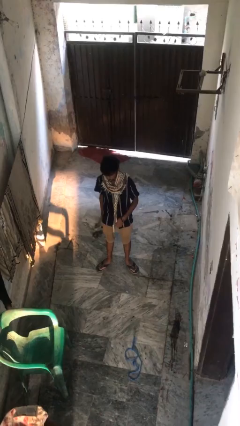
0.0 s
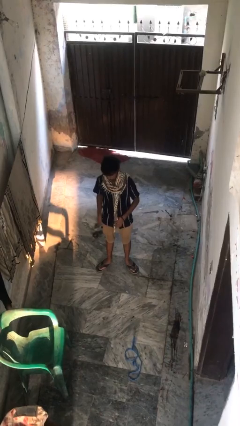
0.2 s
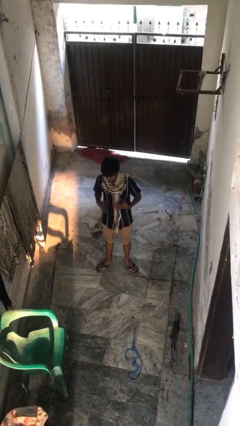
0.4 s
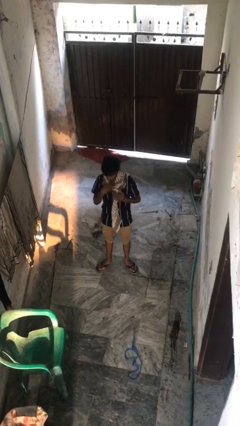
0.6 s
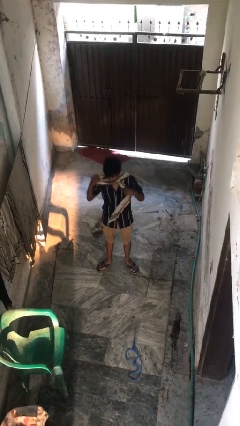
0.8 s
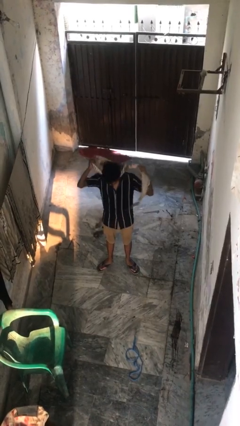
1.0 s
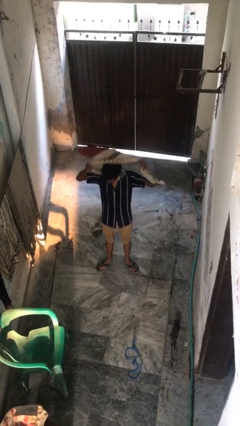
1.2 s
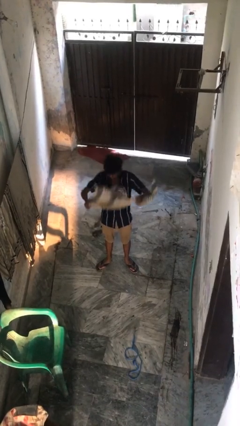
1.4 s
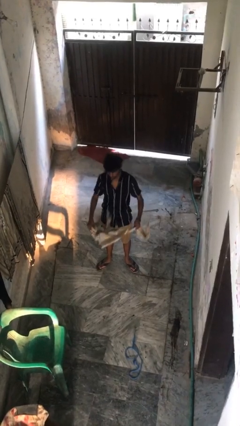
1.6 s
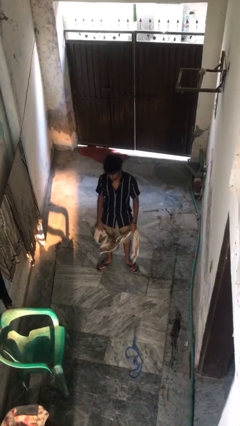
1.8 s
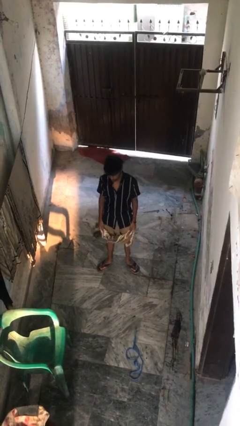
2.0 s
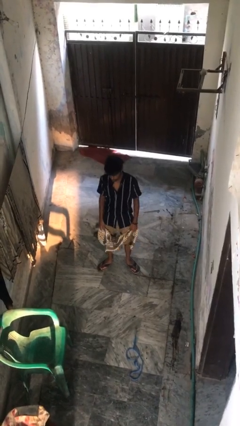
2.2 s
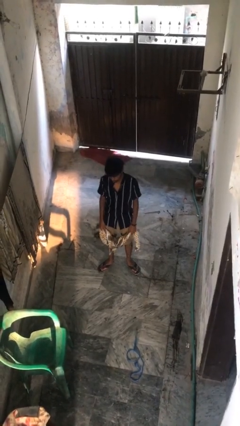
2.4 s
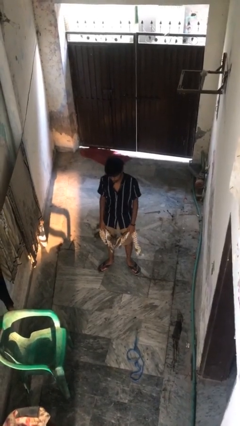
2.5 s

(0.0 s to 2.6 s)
person takes off scarf

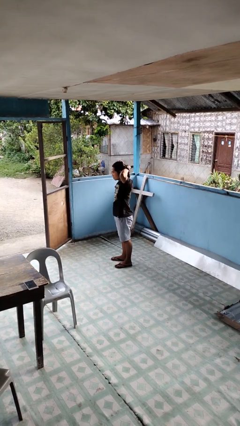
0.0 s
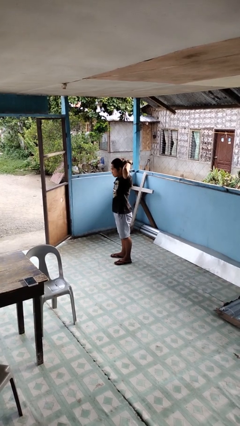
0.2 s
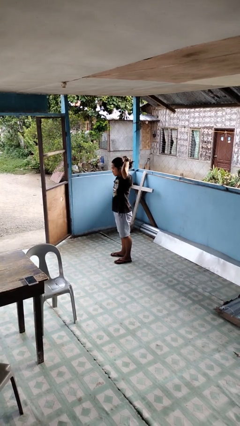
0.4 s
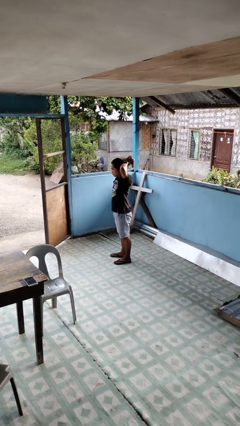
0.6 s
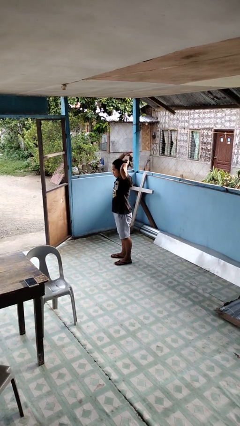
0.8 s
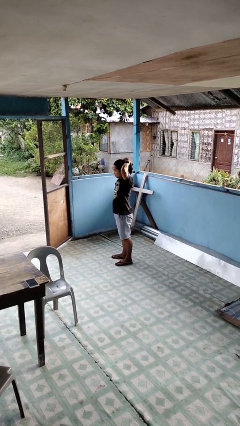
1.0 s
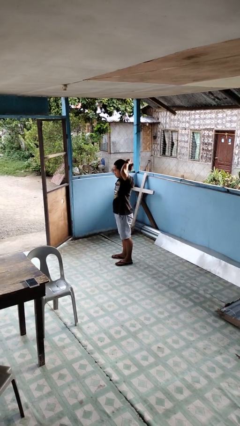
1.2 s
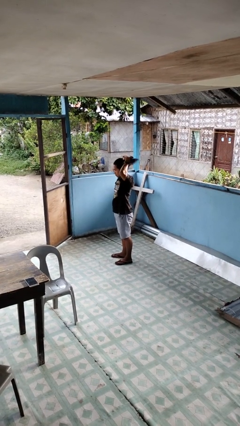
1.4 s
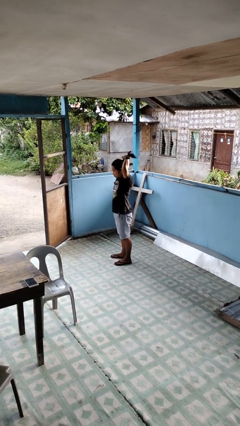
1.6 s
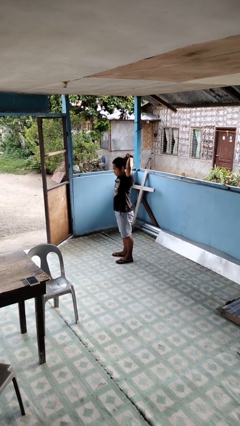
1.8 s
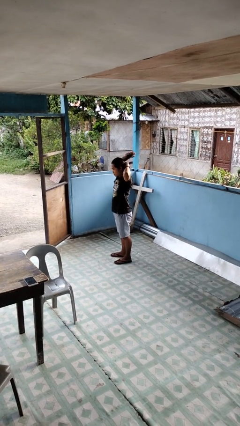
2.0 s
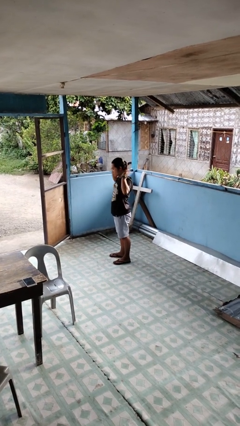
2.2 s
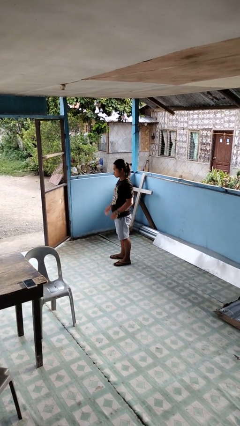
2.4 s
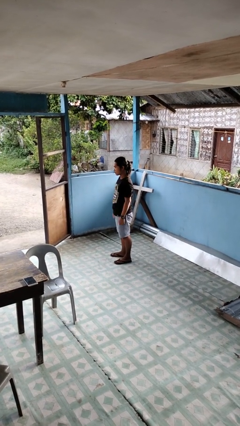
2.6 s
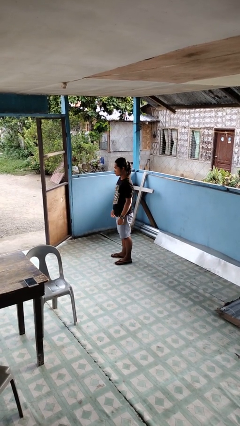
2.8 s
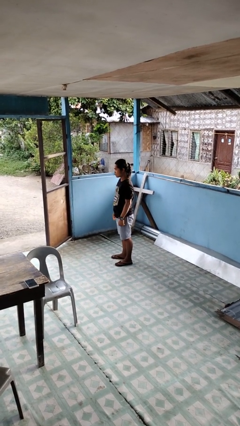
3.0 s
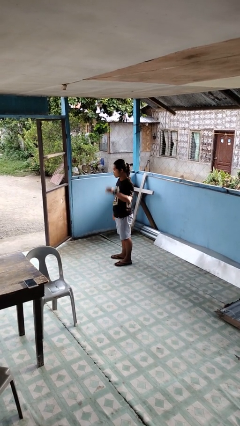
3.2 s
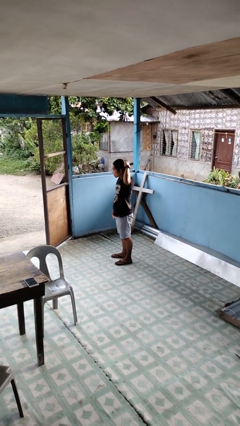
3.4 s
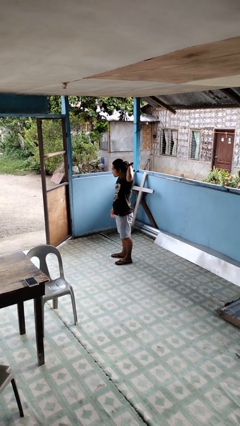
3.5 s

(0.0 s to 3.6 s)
person puts hair in ponytail

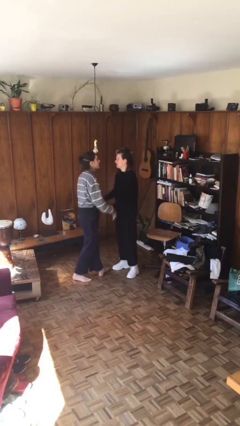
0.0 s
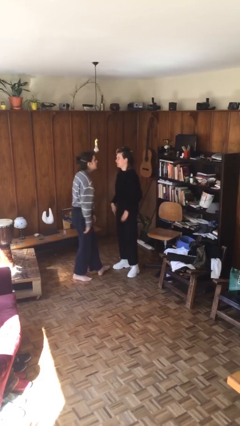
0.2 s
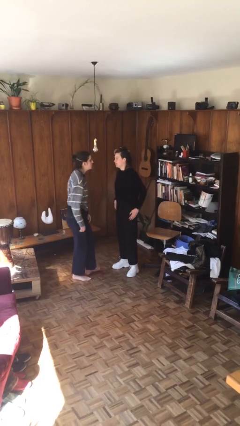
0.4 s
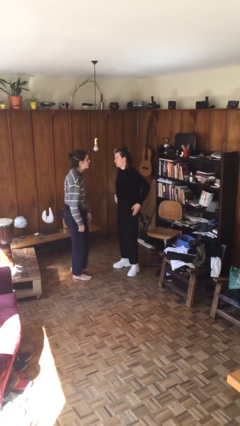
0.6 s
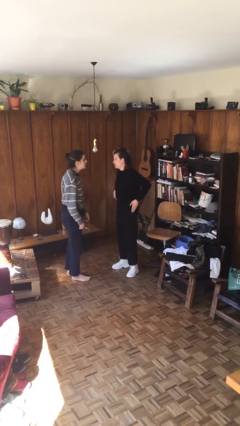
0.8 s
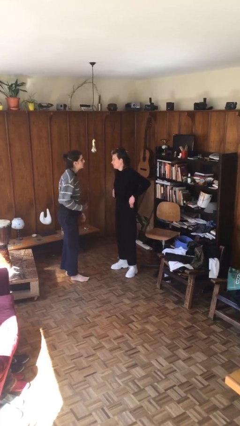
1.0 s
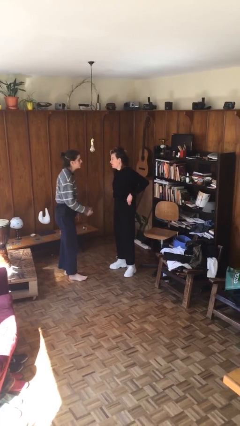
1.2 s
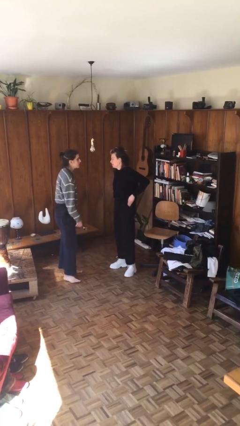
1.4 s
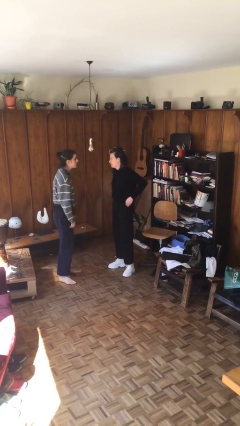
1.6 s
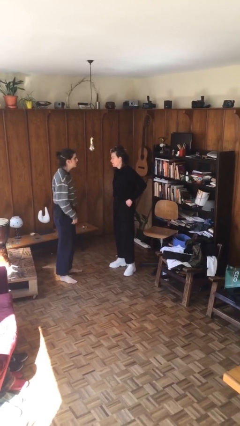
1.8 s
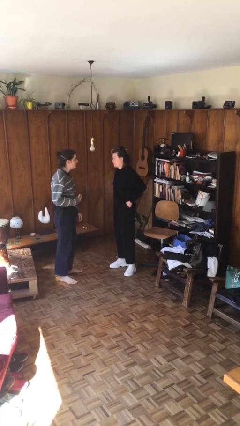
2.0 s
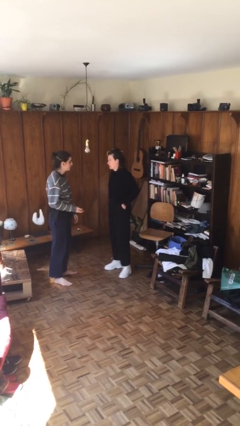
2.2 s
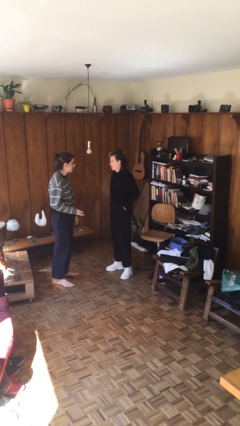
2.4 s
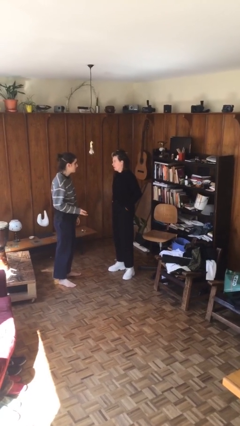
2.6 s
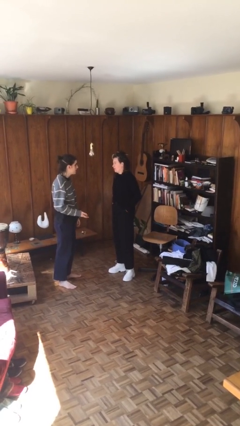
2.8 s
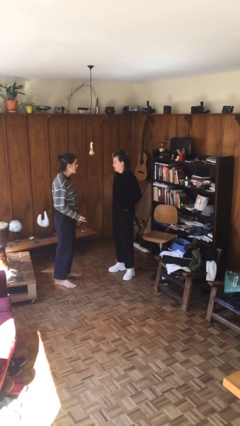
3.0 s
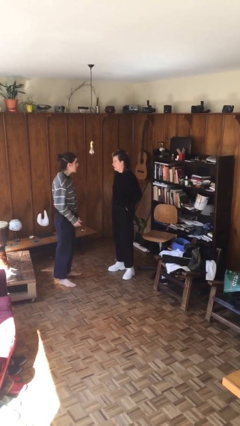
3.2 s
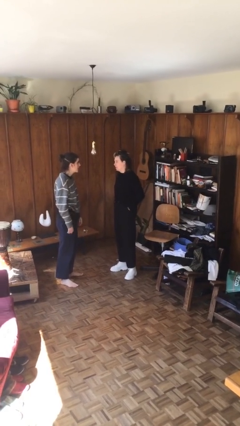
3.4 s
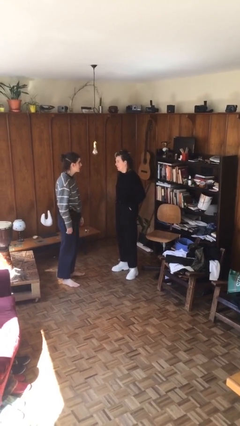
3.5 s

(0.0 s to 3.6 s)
person talks to person

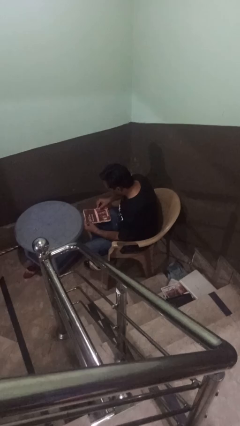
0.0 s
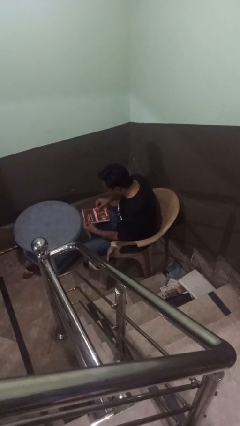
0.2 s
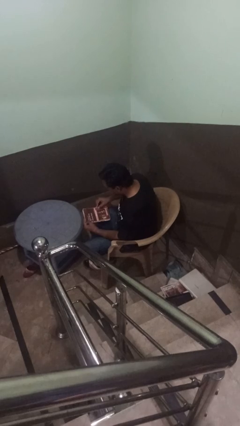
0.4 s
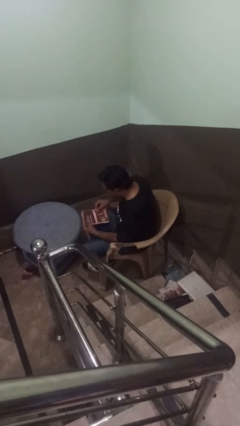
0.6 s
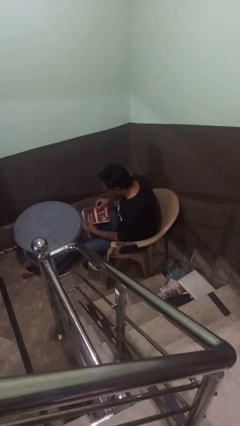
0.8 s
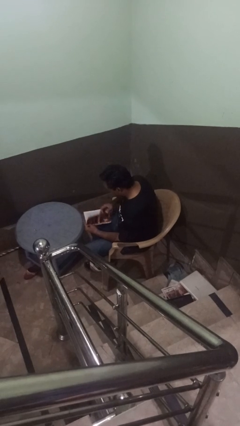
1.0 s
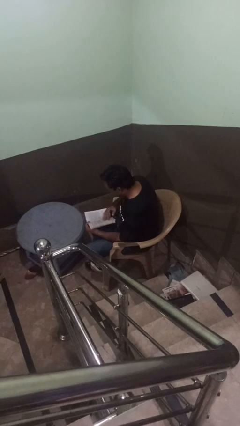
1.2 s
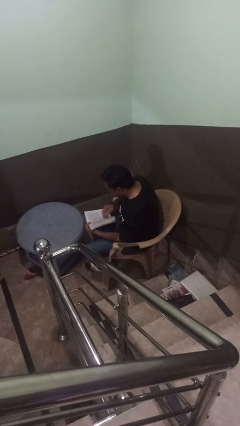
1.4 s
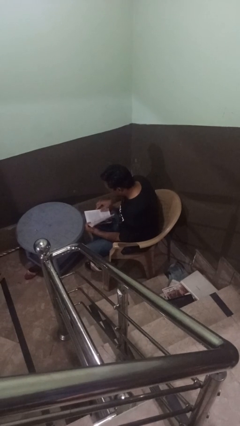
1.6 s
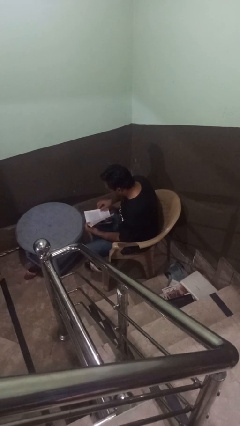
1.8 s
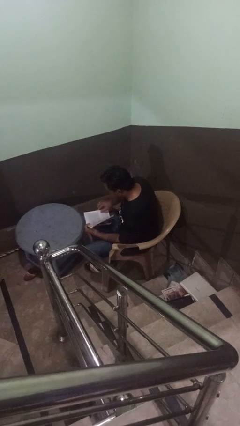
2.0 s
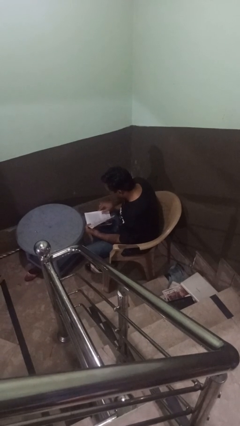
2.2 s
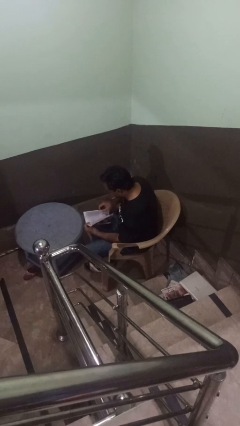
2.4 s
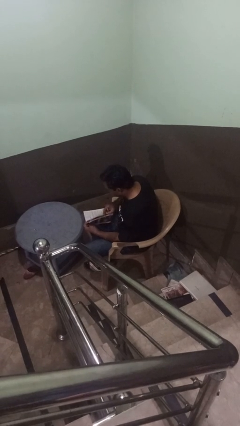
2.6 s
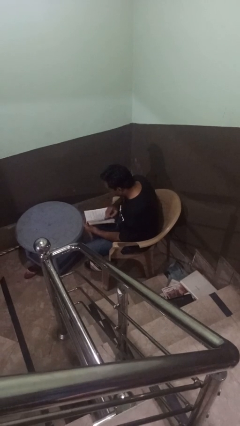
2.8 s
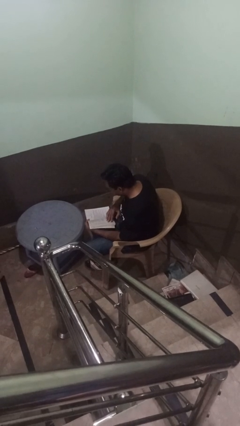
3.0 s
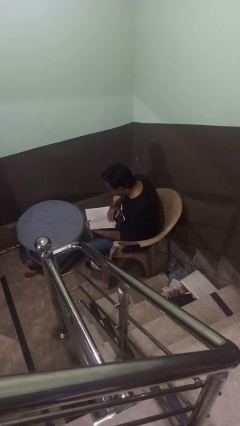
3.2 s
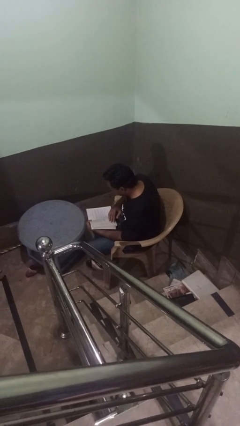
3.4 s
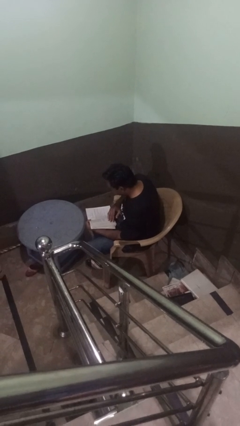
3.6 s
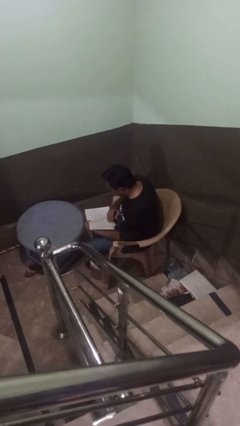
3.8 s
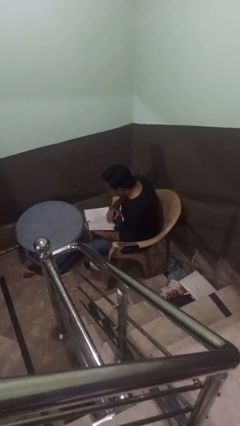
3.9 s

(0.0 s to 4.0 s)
person reads book

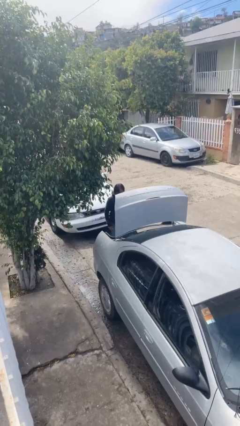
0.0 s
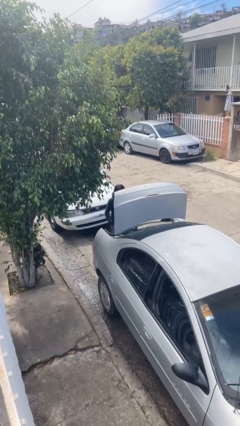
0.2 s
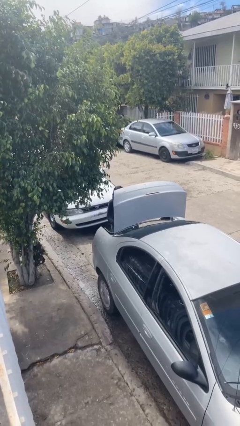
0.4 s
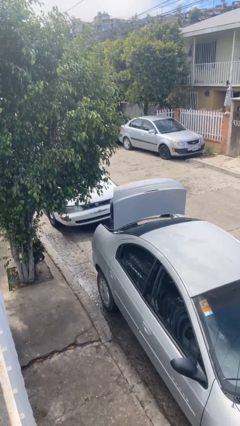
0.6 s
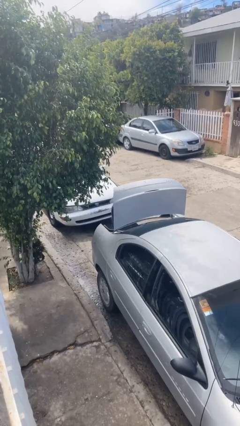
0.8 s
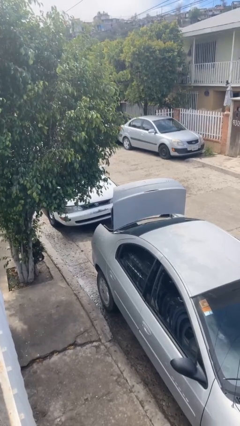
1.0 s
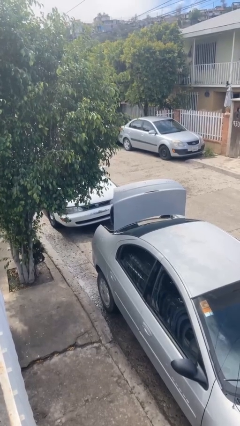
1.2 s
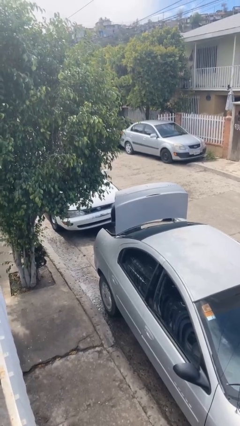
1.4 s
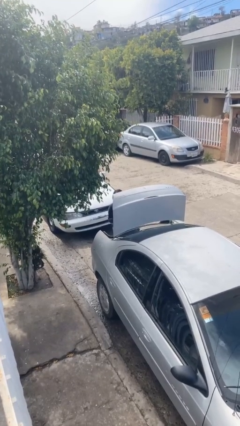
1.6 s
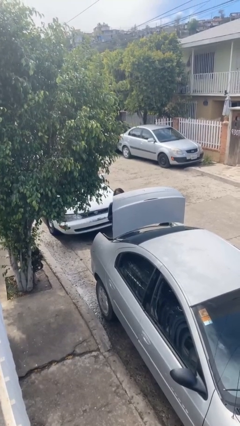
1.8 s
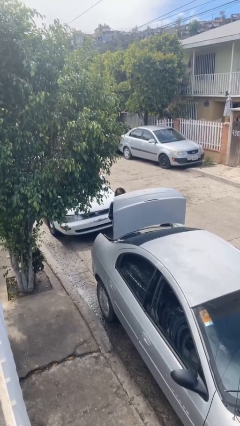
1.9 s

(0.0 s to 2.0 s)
person unloads car

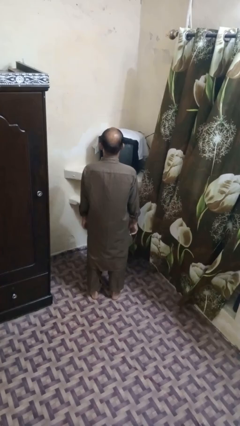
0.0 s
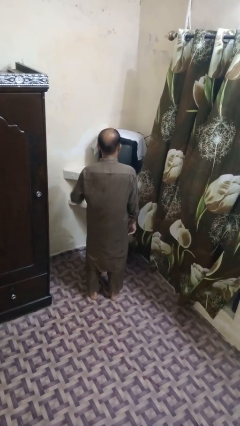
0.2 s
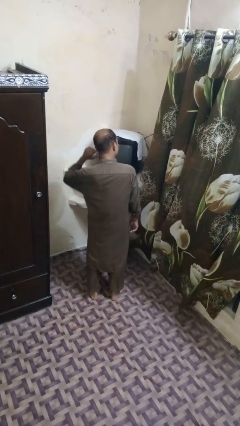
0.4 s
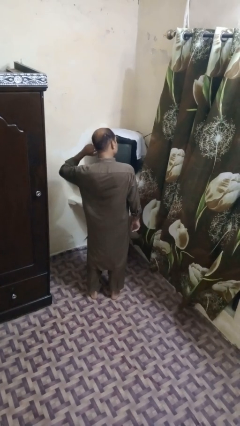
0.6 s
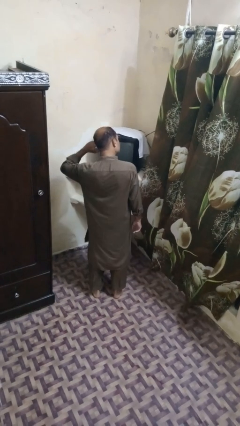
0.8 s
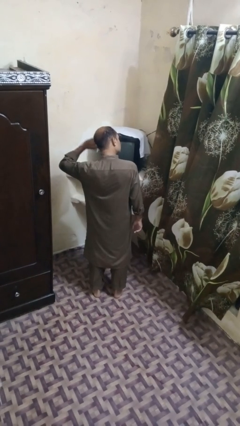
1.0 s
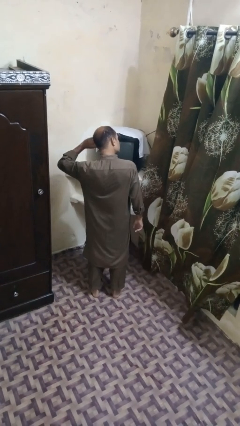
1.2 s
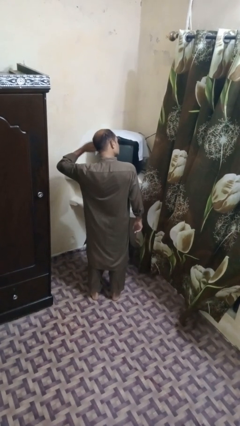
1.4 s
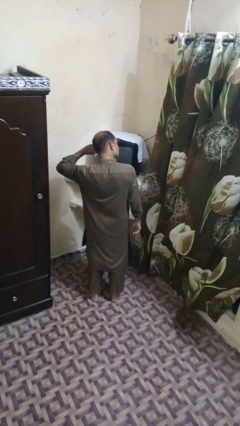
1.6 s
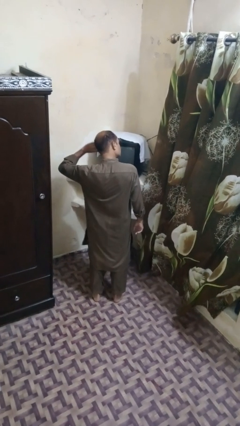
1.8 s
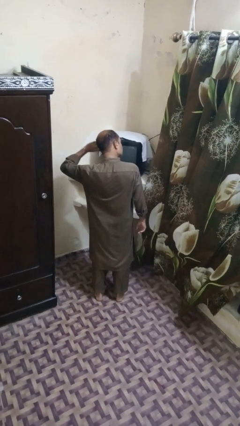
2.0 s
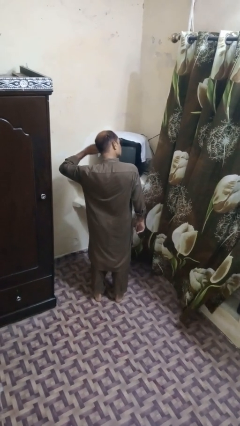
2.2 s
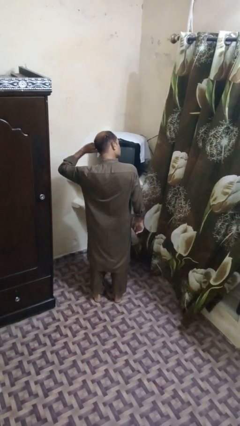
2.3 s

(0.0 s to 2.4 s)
person puts fingers in ear
